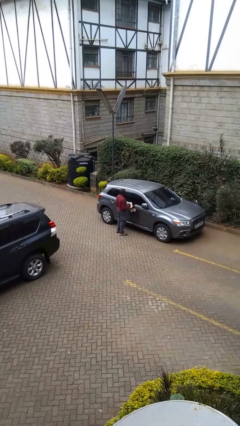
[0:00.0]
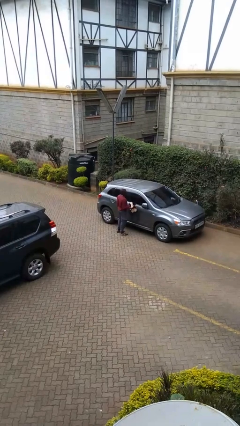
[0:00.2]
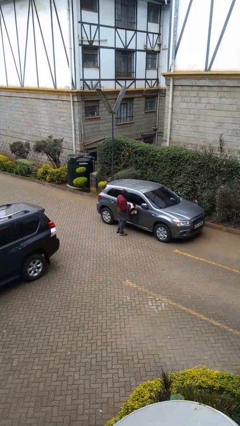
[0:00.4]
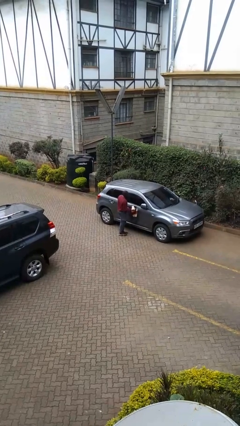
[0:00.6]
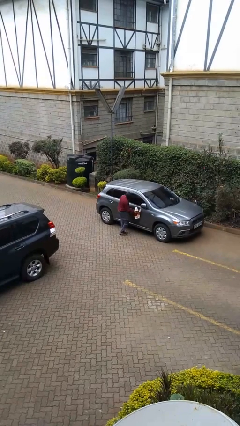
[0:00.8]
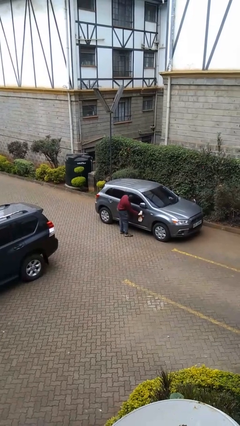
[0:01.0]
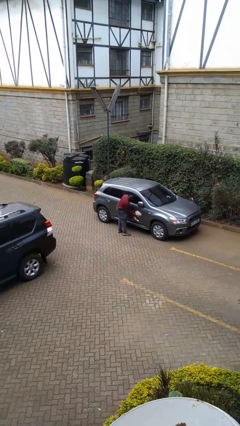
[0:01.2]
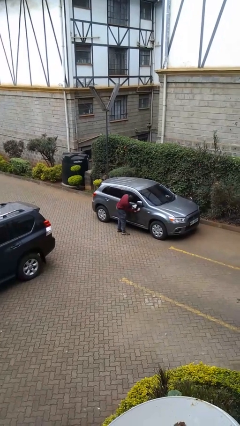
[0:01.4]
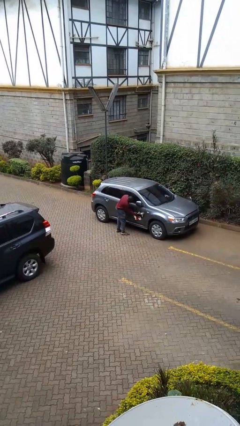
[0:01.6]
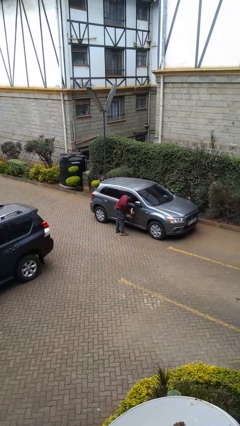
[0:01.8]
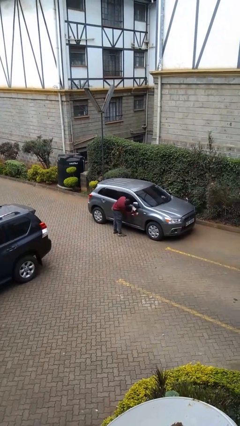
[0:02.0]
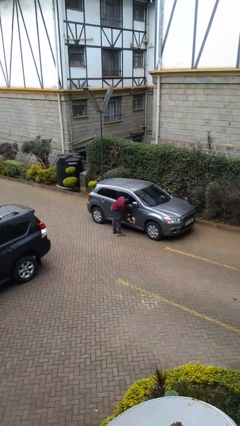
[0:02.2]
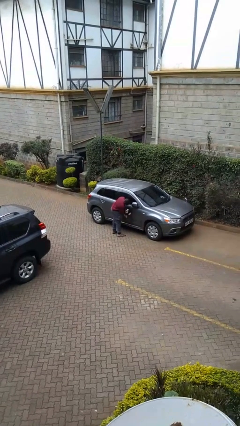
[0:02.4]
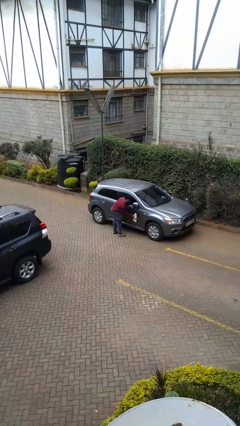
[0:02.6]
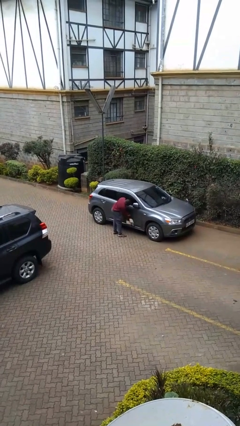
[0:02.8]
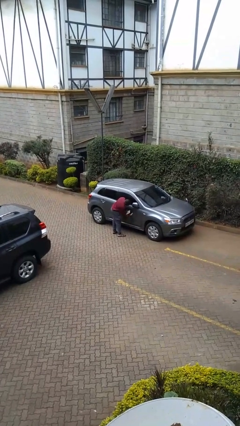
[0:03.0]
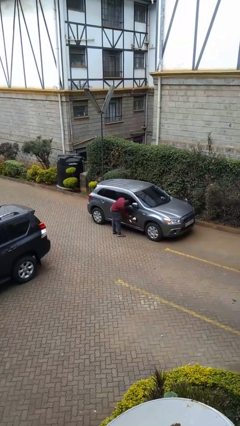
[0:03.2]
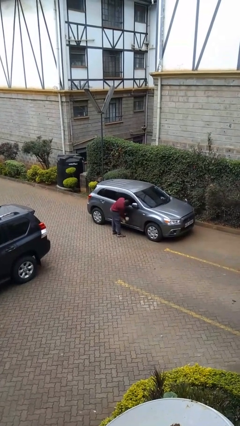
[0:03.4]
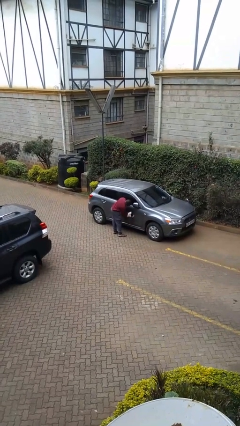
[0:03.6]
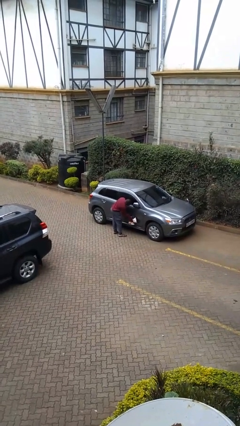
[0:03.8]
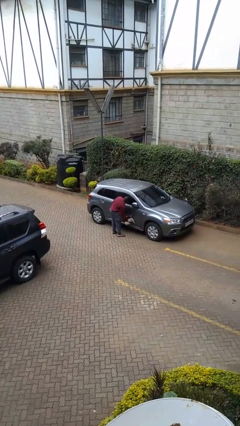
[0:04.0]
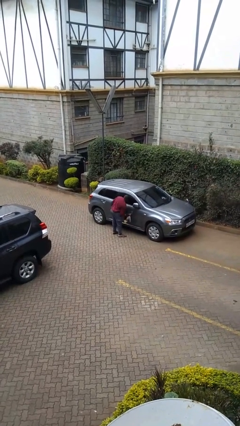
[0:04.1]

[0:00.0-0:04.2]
person polishes car with rag

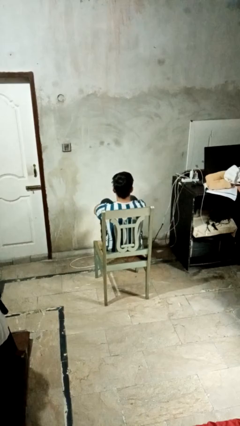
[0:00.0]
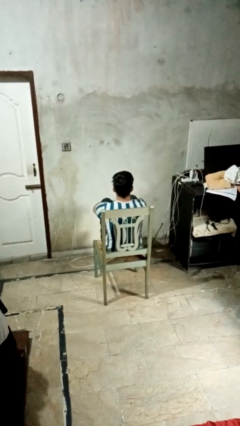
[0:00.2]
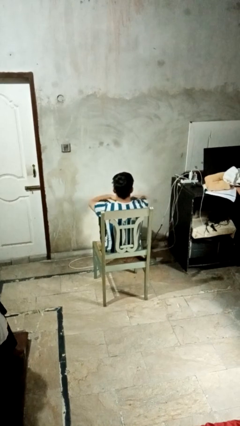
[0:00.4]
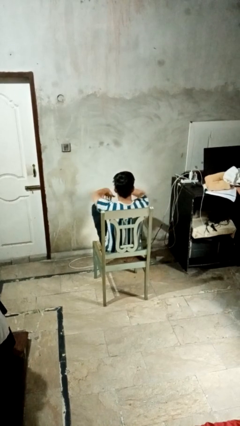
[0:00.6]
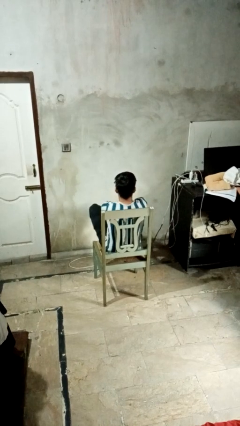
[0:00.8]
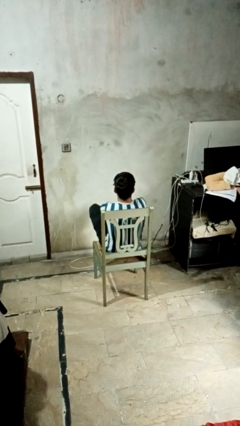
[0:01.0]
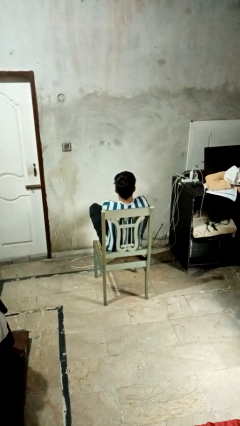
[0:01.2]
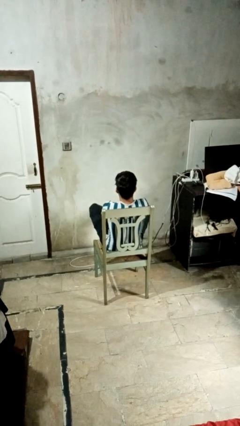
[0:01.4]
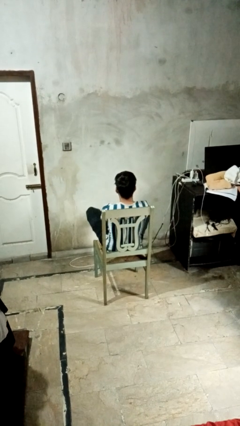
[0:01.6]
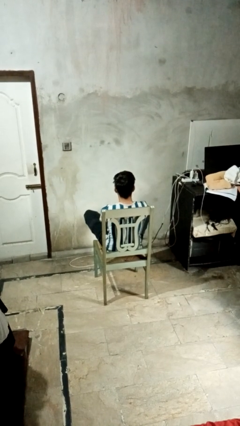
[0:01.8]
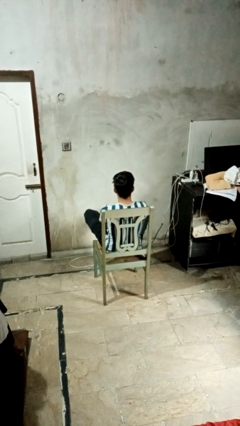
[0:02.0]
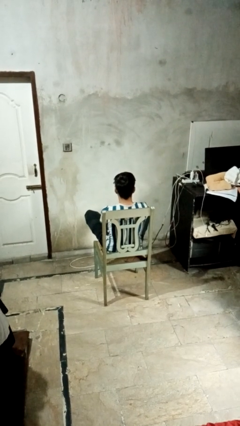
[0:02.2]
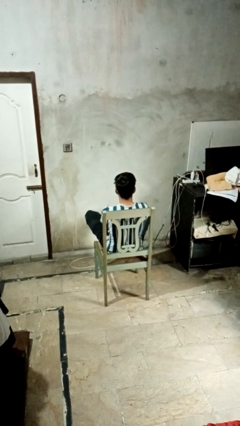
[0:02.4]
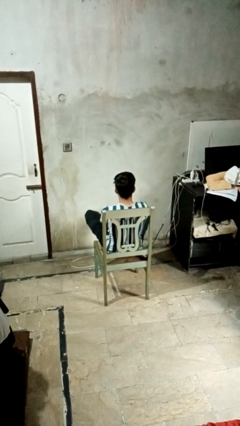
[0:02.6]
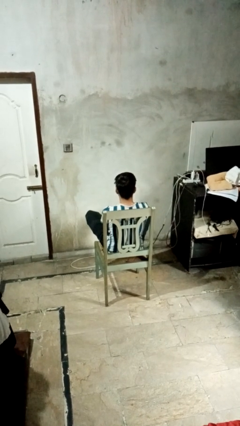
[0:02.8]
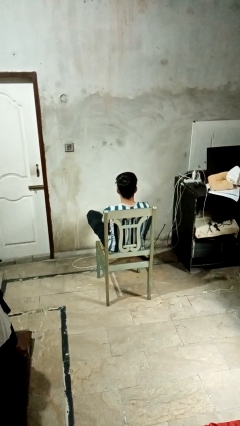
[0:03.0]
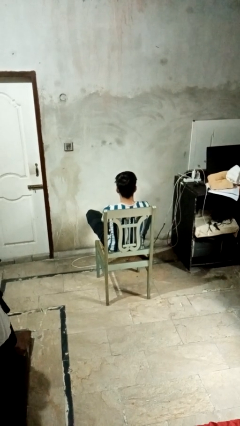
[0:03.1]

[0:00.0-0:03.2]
person crosses legs

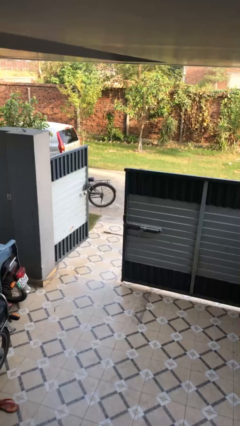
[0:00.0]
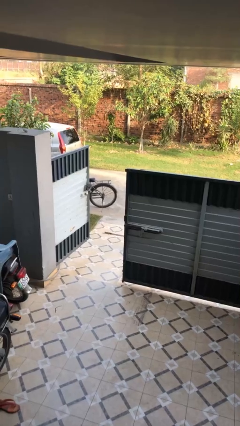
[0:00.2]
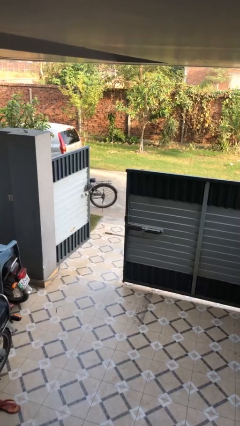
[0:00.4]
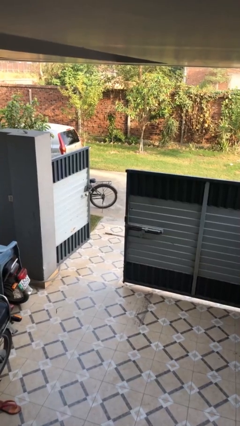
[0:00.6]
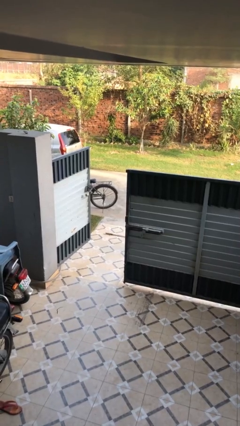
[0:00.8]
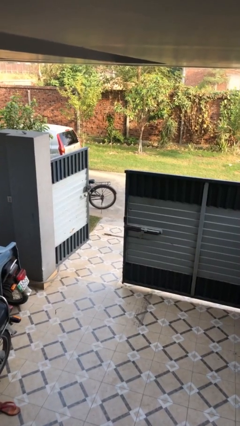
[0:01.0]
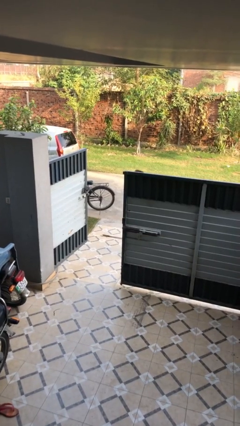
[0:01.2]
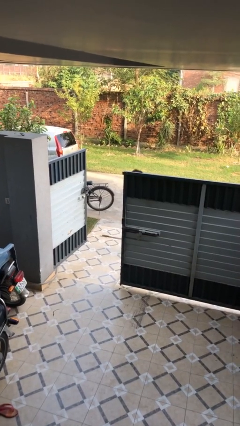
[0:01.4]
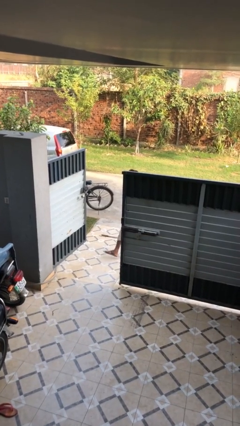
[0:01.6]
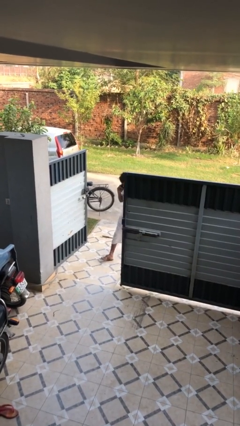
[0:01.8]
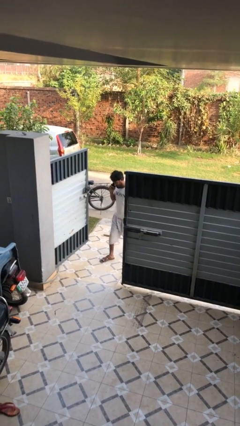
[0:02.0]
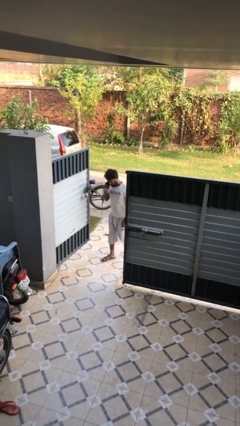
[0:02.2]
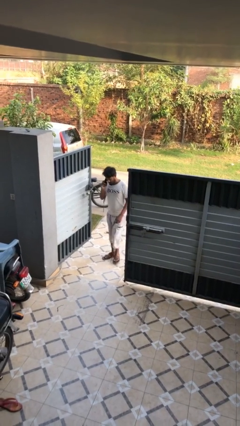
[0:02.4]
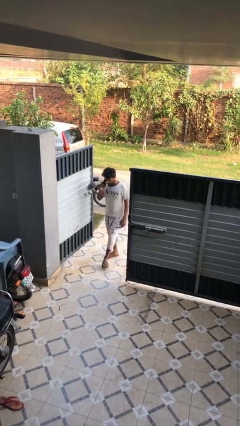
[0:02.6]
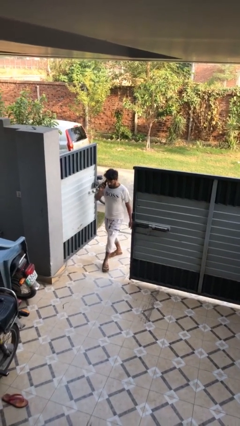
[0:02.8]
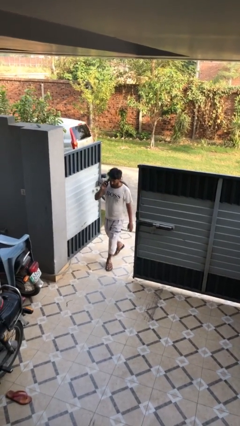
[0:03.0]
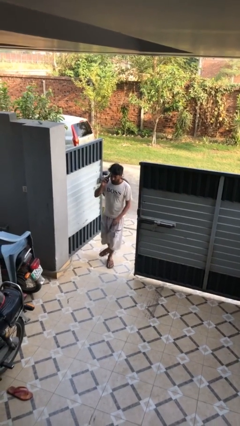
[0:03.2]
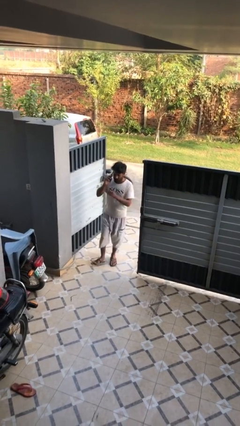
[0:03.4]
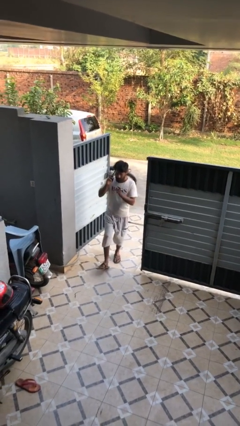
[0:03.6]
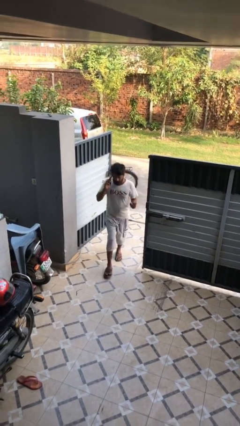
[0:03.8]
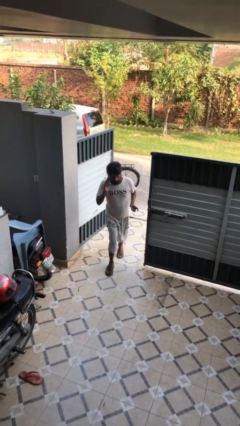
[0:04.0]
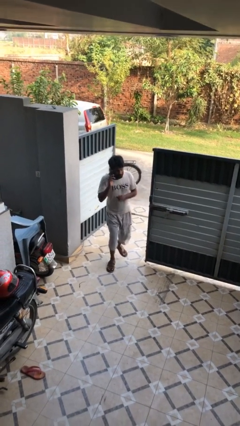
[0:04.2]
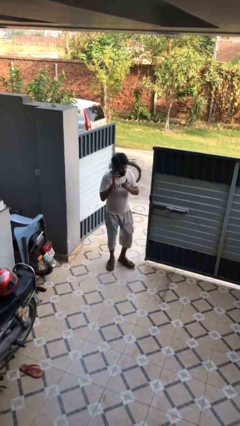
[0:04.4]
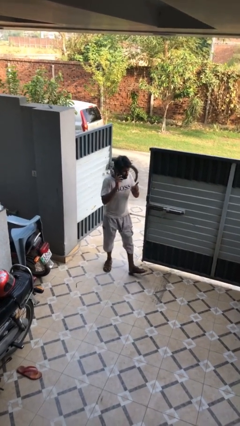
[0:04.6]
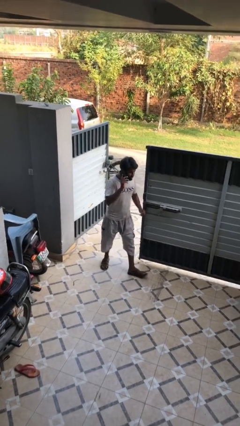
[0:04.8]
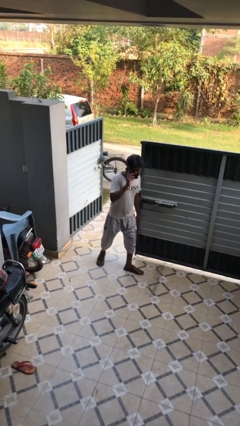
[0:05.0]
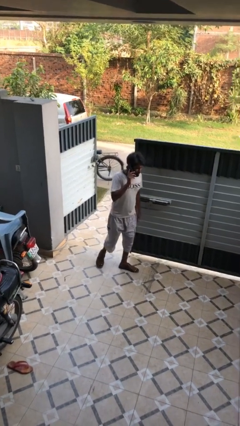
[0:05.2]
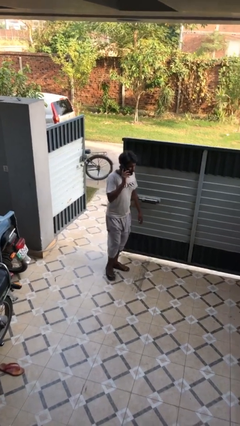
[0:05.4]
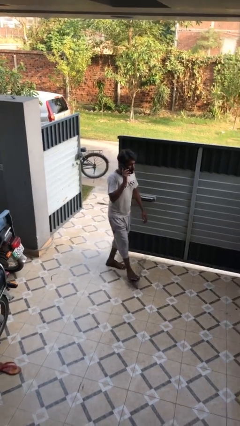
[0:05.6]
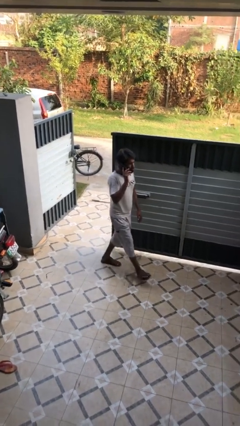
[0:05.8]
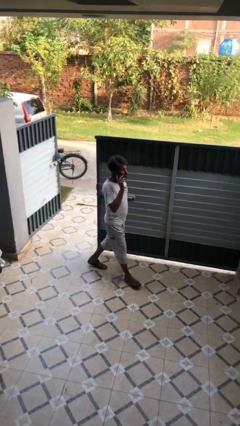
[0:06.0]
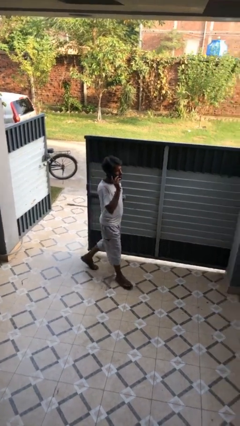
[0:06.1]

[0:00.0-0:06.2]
person enters scene through structure

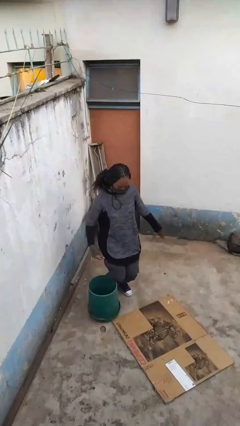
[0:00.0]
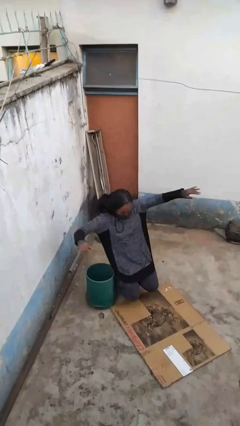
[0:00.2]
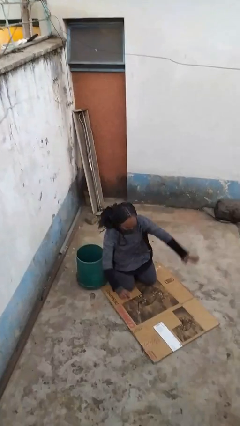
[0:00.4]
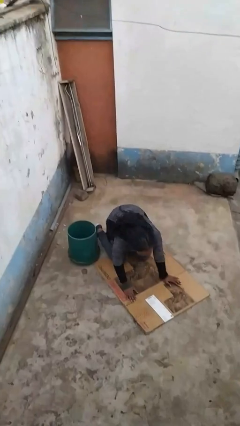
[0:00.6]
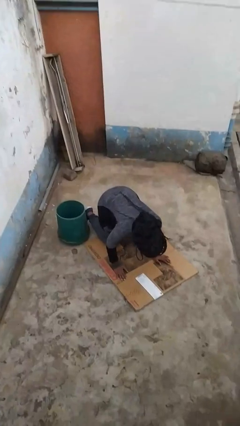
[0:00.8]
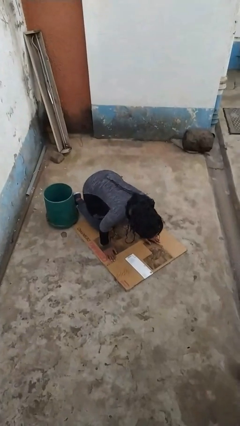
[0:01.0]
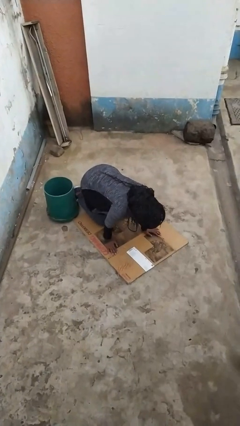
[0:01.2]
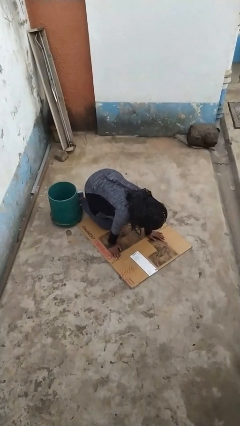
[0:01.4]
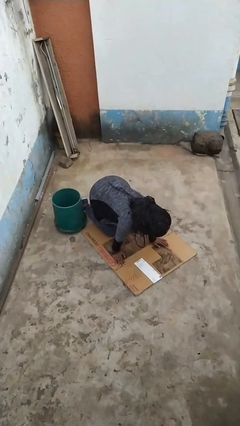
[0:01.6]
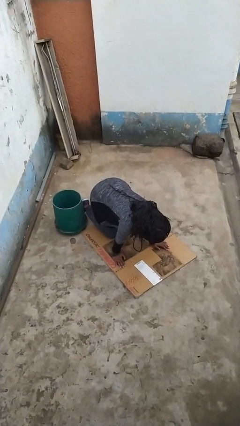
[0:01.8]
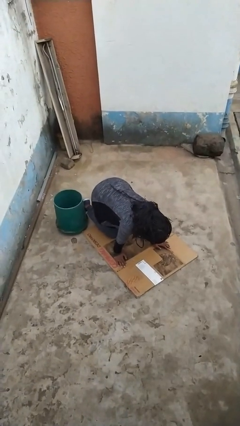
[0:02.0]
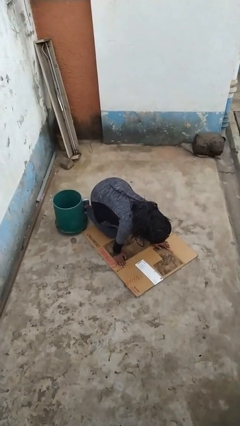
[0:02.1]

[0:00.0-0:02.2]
person trips on object on floor

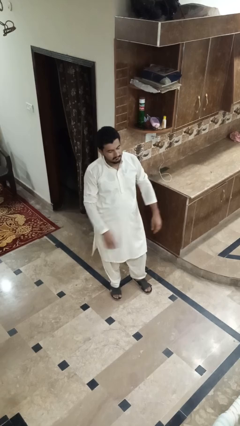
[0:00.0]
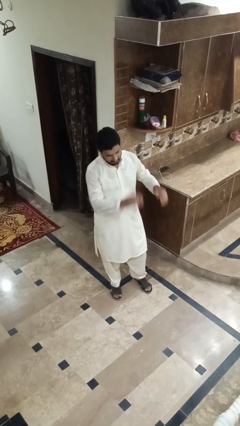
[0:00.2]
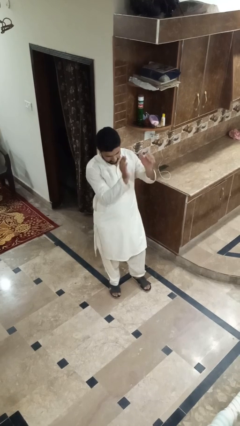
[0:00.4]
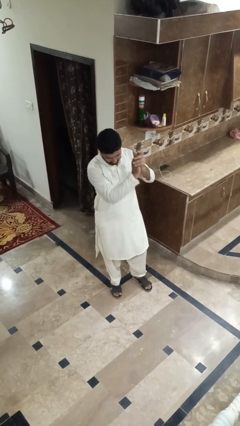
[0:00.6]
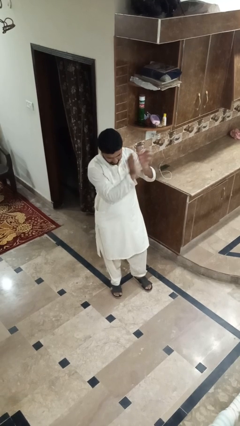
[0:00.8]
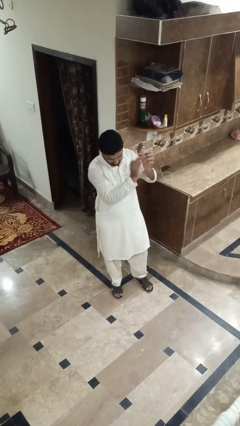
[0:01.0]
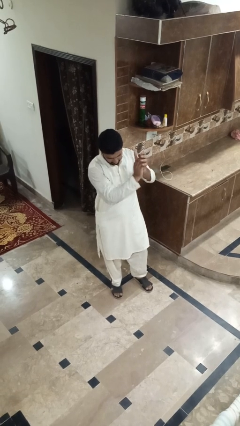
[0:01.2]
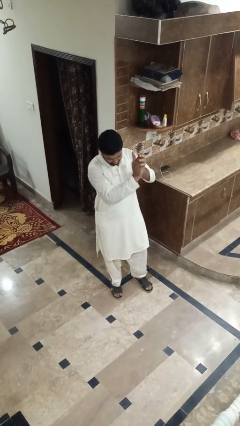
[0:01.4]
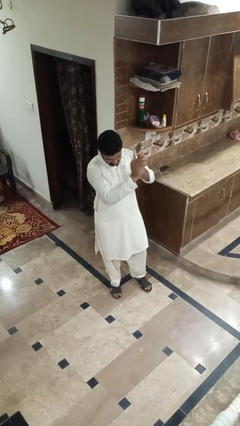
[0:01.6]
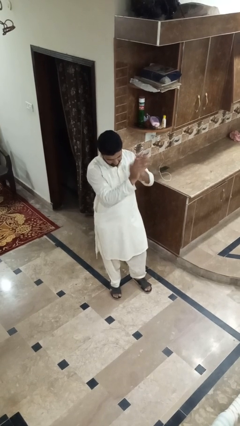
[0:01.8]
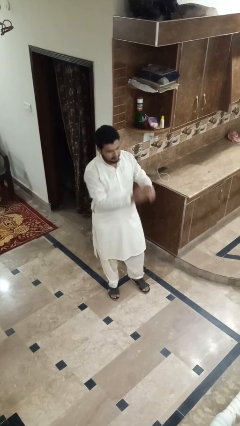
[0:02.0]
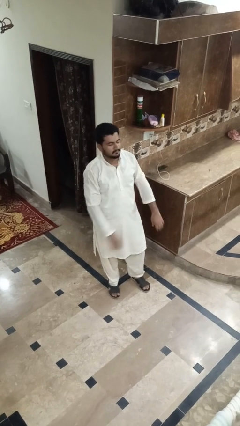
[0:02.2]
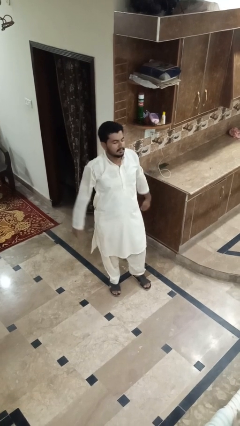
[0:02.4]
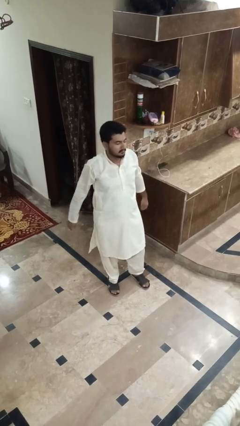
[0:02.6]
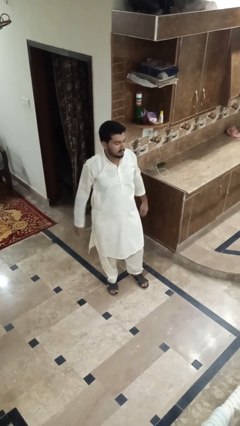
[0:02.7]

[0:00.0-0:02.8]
person claps hands
